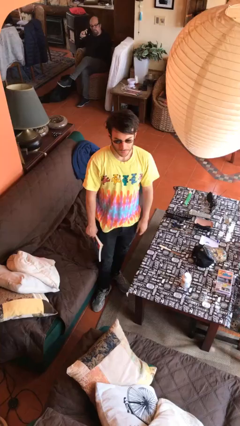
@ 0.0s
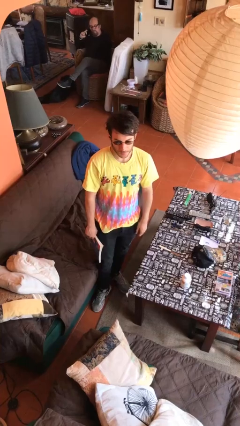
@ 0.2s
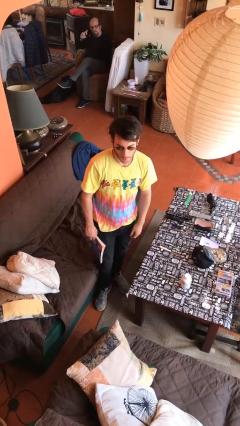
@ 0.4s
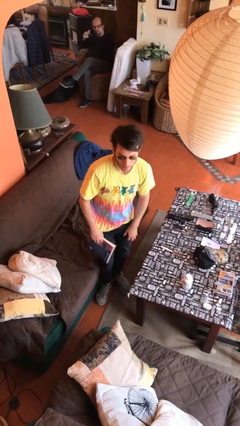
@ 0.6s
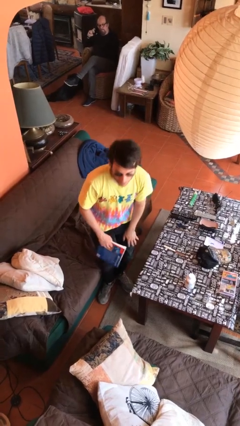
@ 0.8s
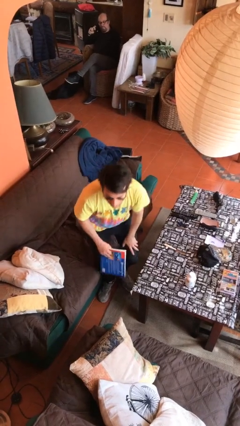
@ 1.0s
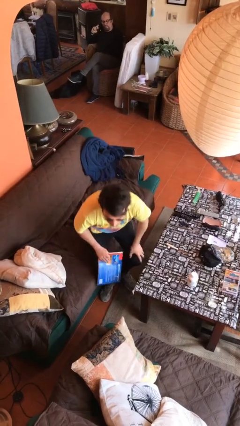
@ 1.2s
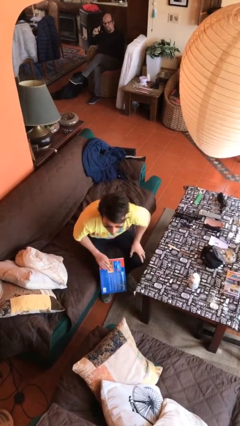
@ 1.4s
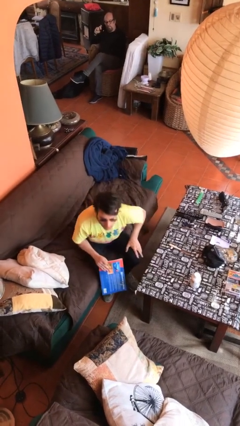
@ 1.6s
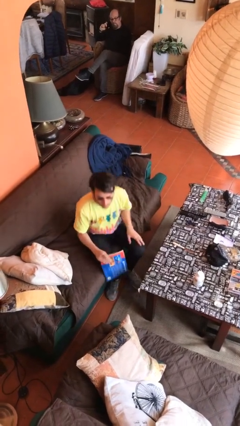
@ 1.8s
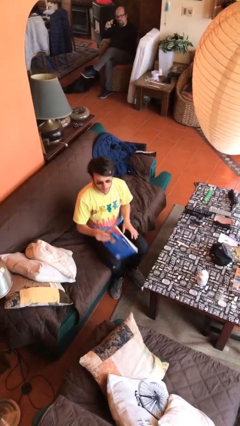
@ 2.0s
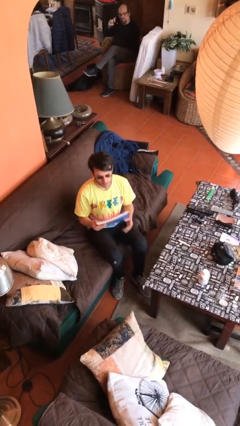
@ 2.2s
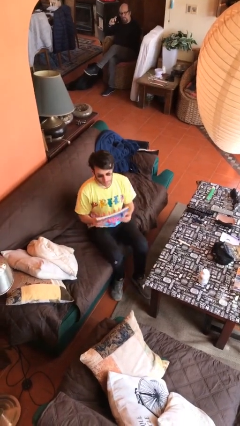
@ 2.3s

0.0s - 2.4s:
person sits down

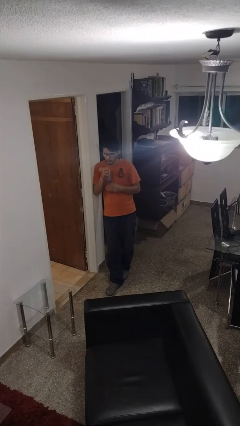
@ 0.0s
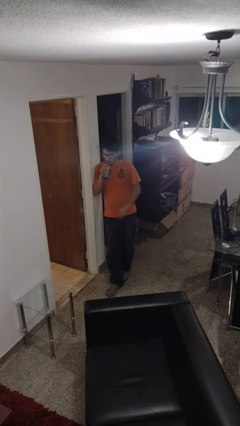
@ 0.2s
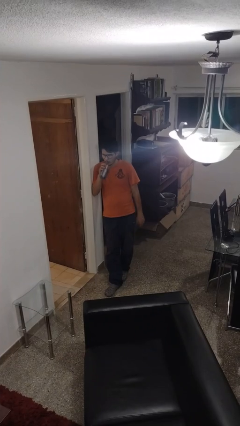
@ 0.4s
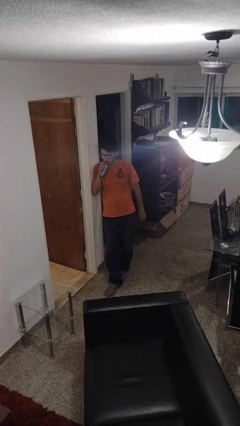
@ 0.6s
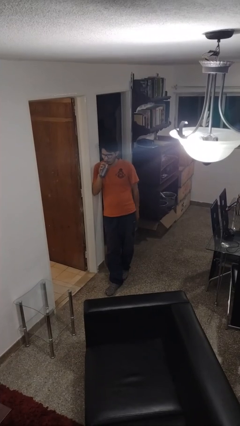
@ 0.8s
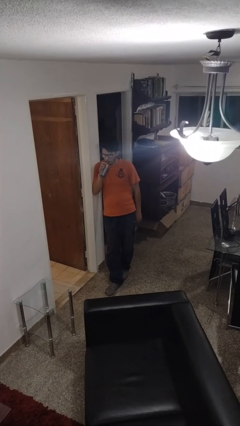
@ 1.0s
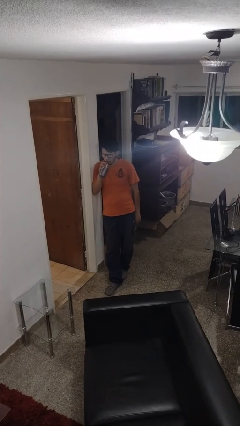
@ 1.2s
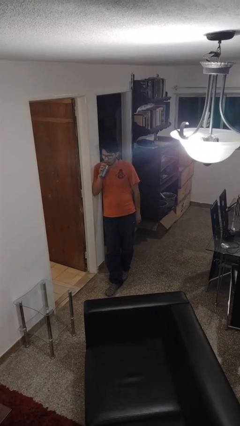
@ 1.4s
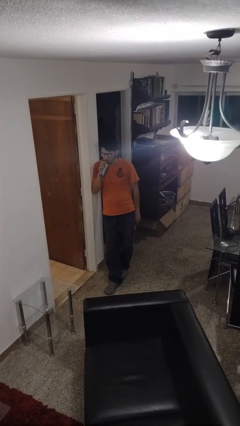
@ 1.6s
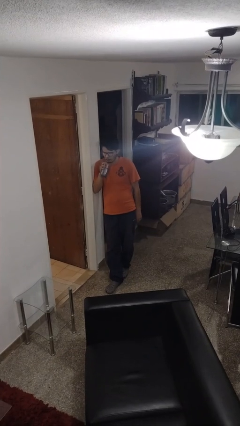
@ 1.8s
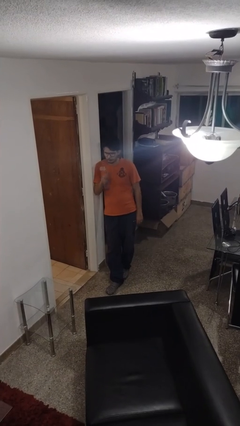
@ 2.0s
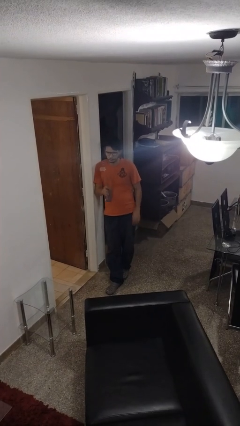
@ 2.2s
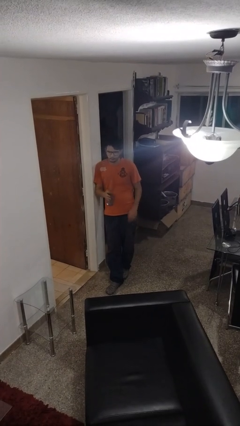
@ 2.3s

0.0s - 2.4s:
person drinks from straw

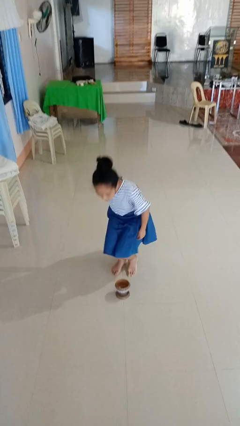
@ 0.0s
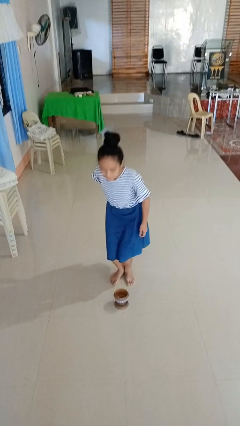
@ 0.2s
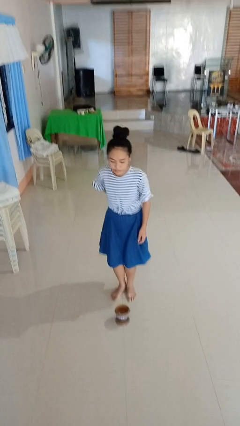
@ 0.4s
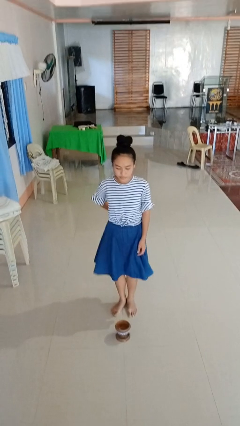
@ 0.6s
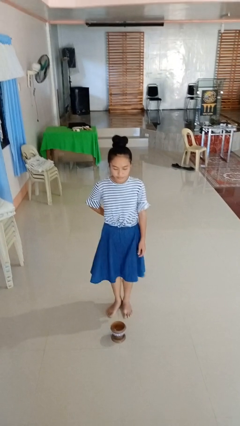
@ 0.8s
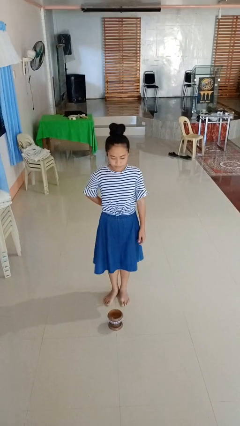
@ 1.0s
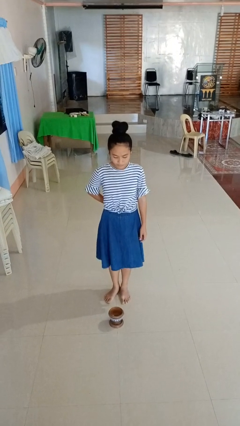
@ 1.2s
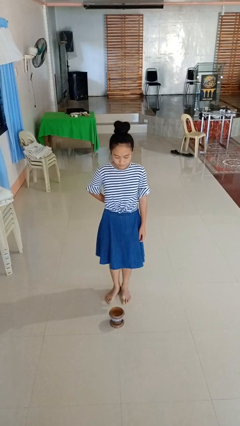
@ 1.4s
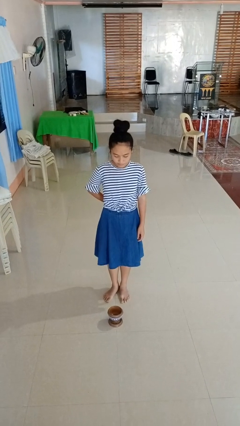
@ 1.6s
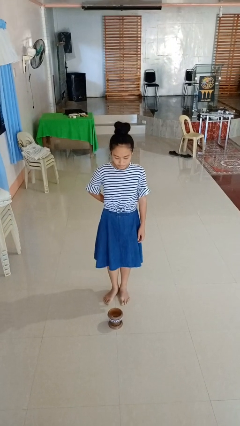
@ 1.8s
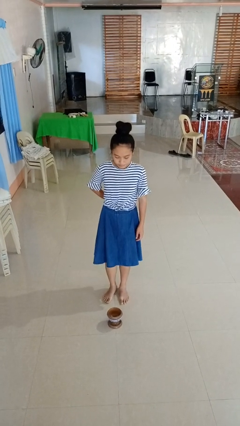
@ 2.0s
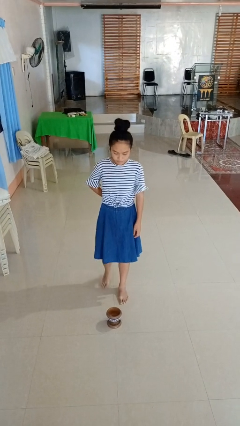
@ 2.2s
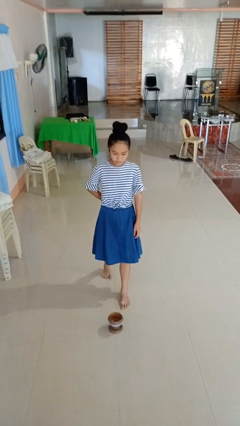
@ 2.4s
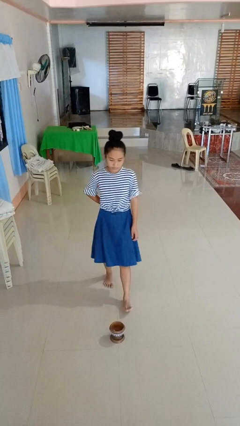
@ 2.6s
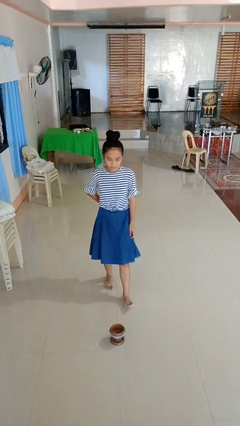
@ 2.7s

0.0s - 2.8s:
person stands up from floor

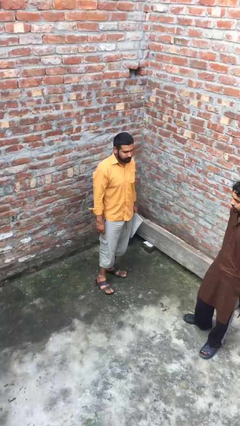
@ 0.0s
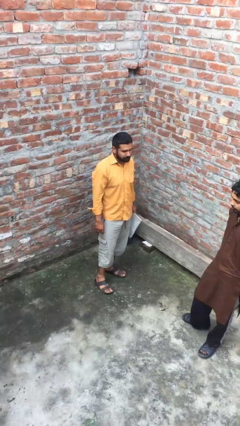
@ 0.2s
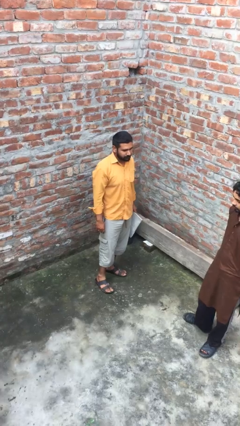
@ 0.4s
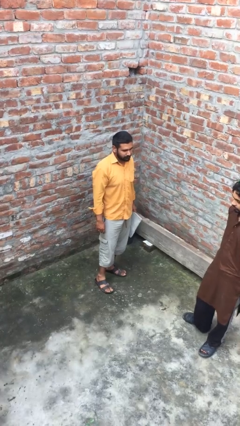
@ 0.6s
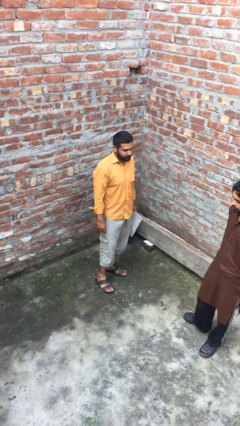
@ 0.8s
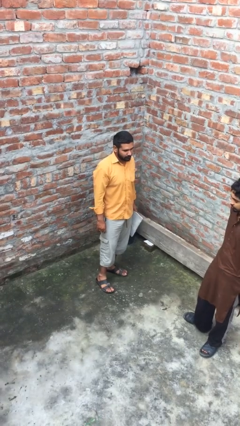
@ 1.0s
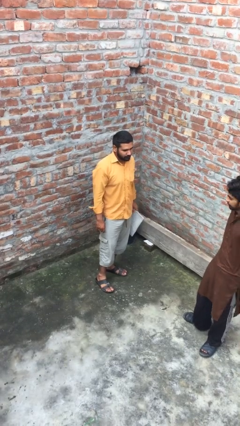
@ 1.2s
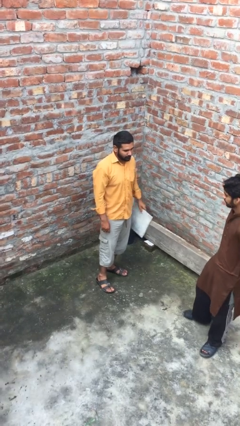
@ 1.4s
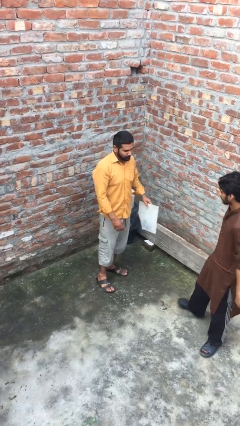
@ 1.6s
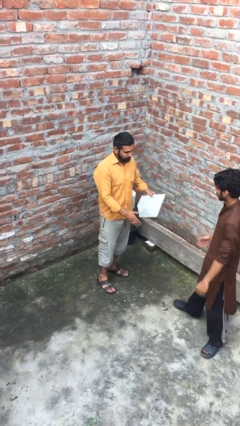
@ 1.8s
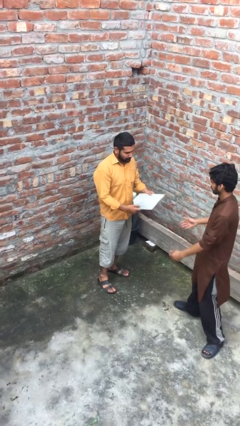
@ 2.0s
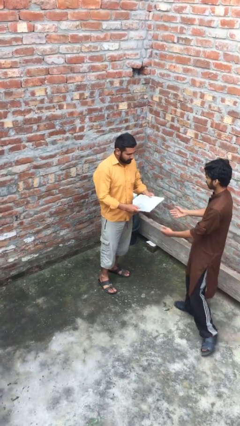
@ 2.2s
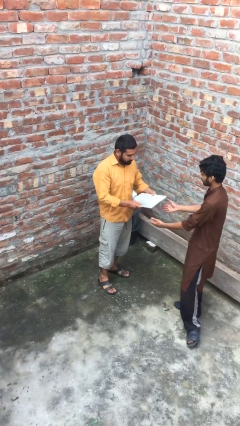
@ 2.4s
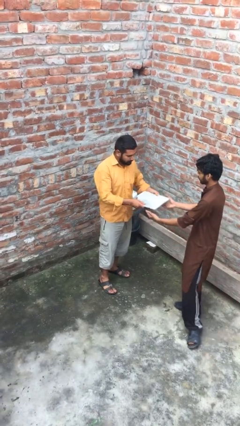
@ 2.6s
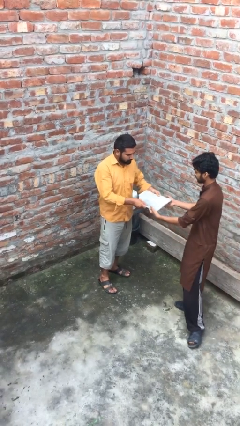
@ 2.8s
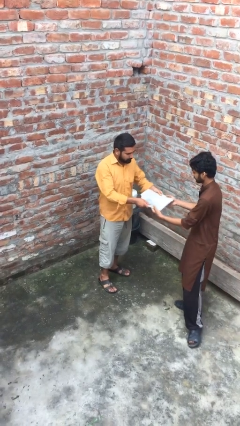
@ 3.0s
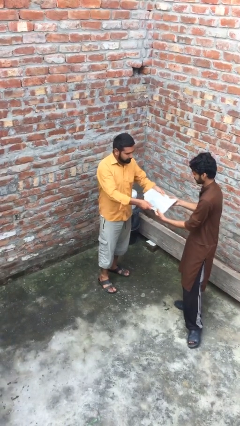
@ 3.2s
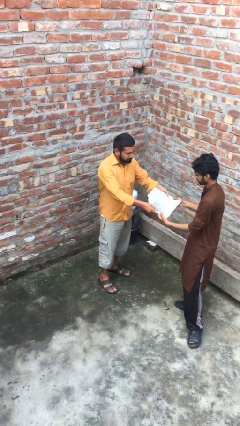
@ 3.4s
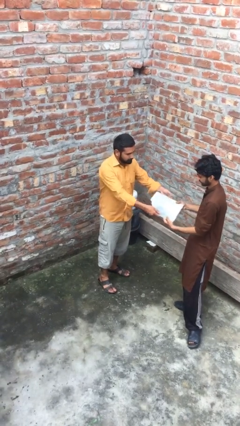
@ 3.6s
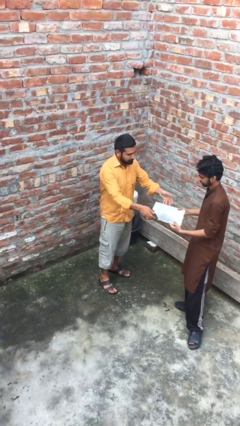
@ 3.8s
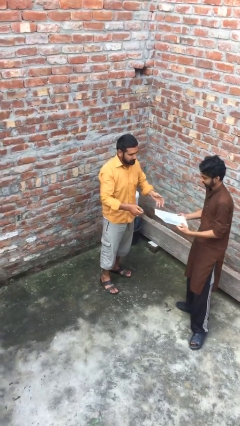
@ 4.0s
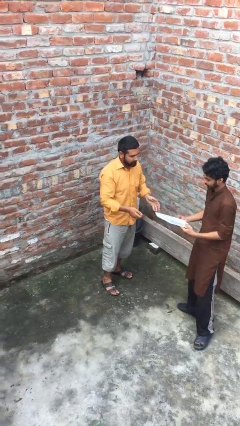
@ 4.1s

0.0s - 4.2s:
person transfers object to person

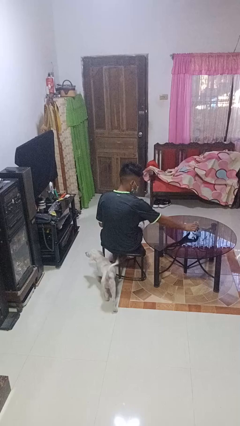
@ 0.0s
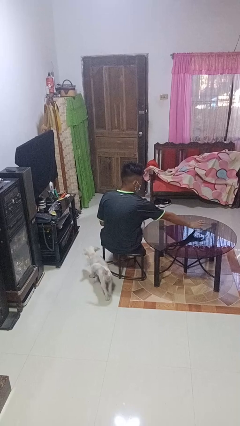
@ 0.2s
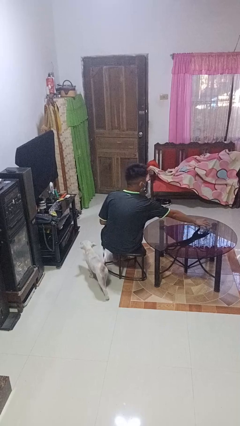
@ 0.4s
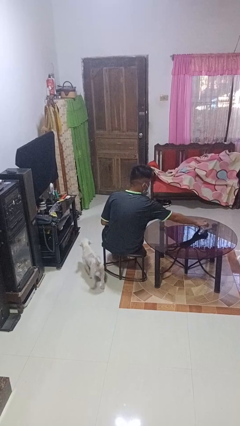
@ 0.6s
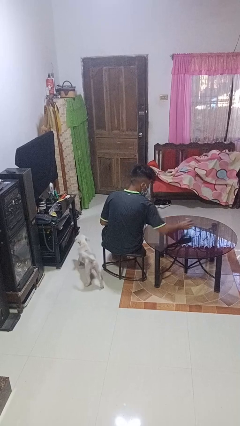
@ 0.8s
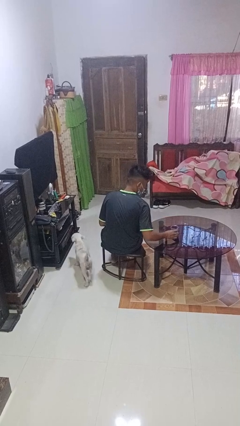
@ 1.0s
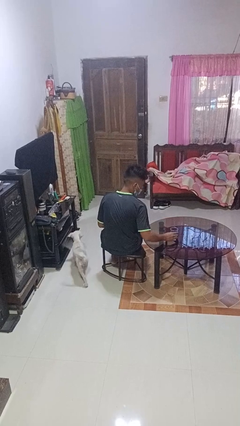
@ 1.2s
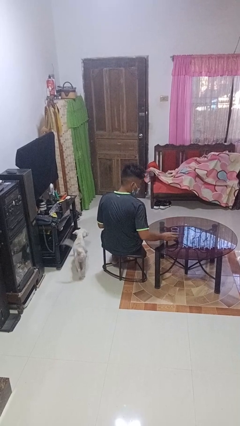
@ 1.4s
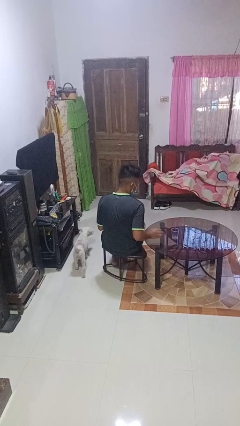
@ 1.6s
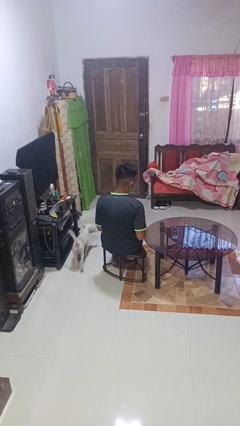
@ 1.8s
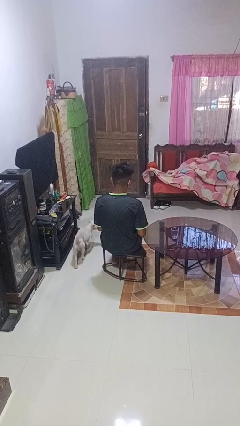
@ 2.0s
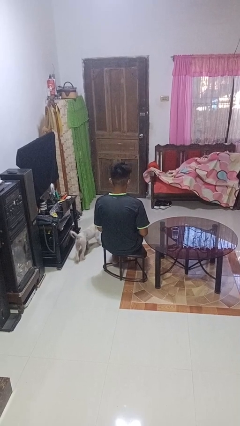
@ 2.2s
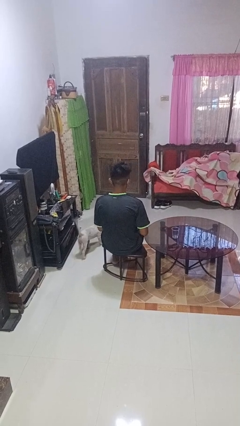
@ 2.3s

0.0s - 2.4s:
person sets upright glass

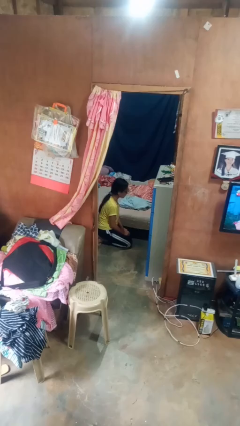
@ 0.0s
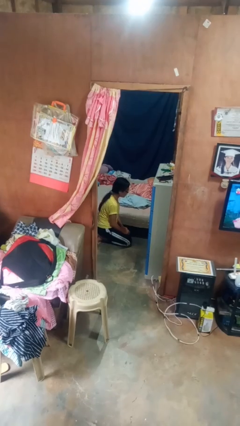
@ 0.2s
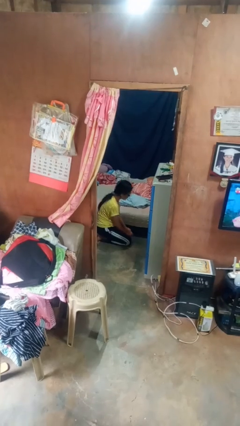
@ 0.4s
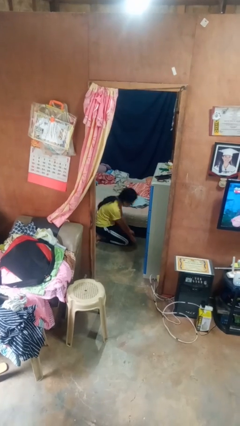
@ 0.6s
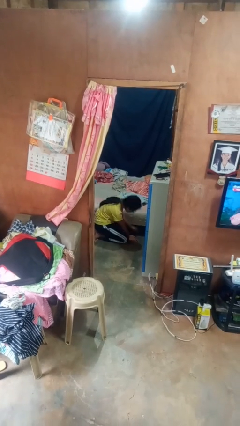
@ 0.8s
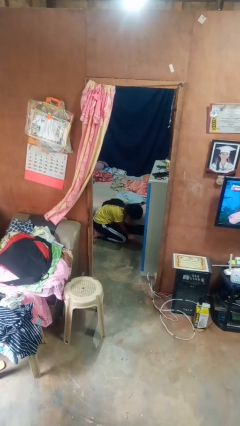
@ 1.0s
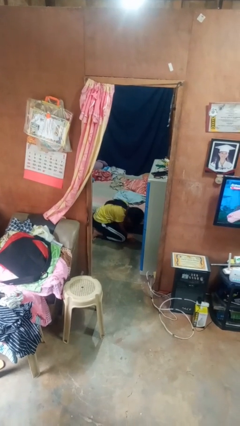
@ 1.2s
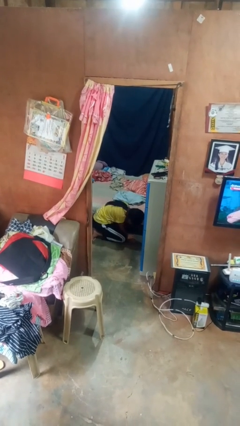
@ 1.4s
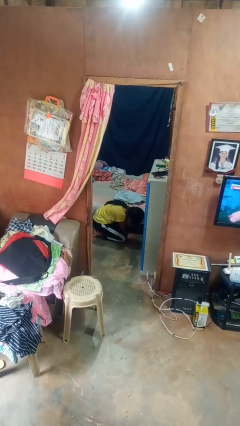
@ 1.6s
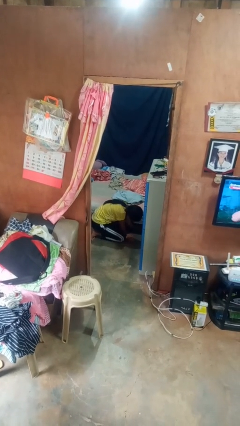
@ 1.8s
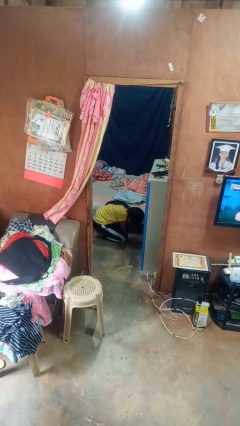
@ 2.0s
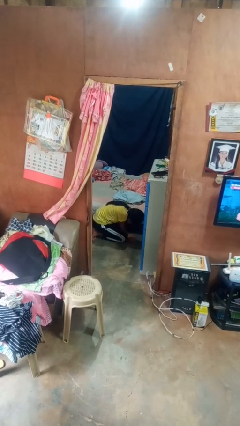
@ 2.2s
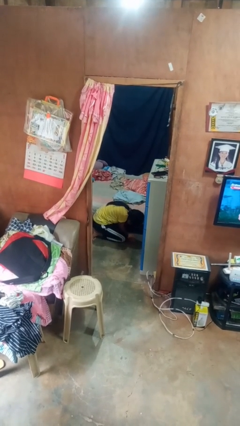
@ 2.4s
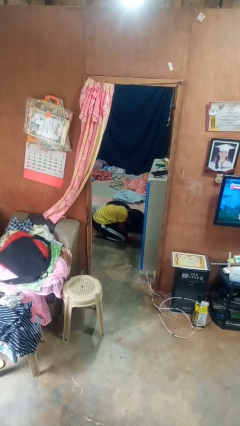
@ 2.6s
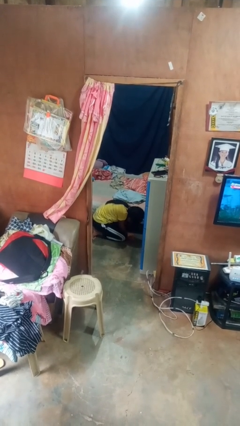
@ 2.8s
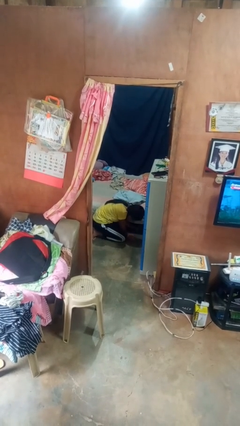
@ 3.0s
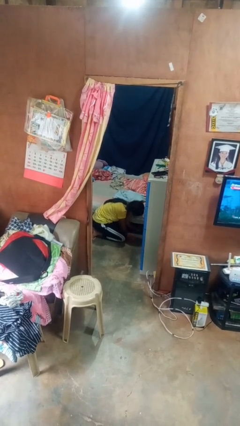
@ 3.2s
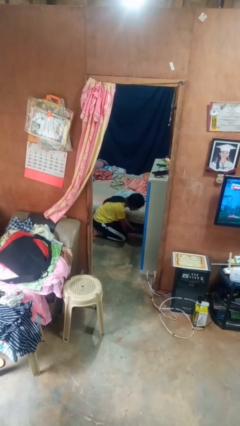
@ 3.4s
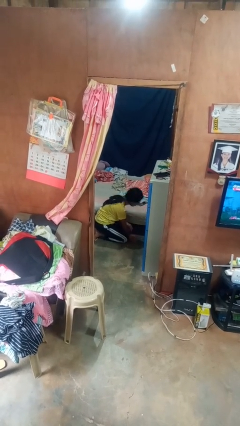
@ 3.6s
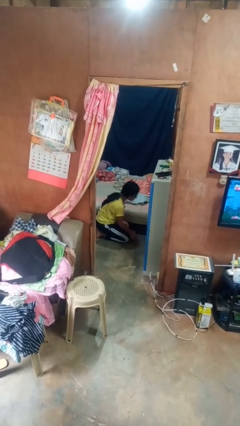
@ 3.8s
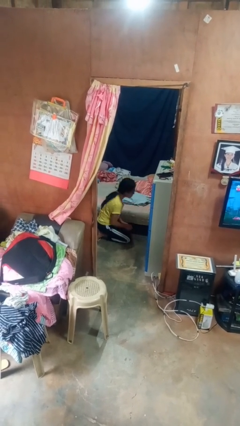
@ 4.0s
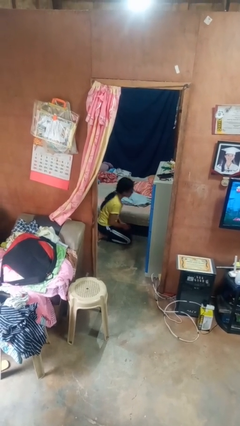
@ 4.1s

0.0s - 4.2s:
person searches under bed
